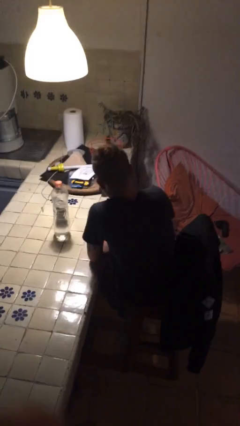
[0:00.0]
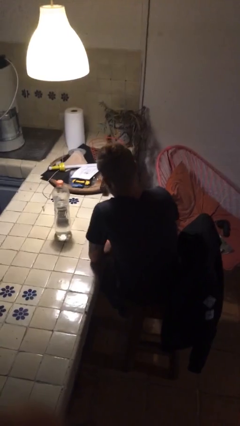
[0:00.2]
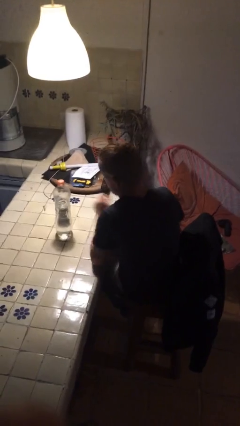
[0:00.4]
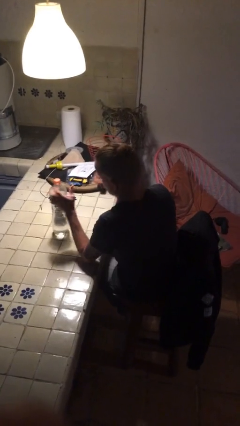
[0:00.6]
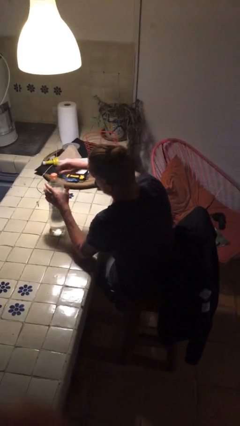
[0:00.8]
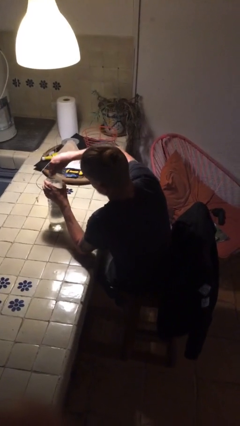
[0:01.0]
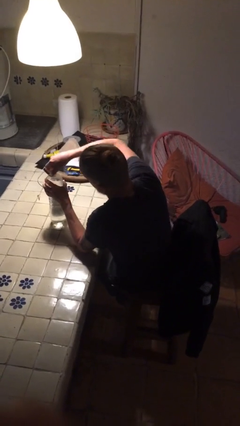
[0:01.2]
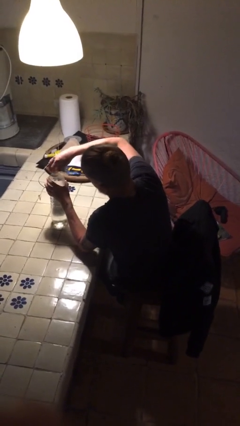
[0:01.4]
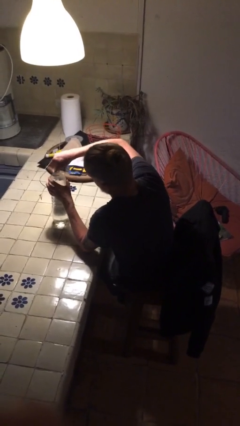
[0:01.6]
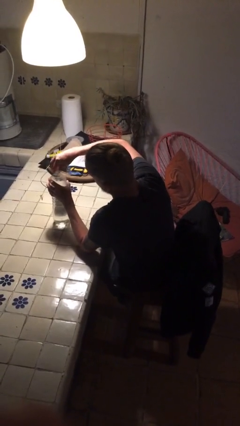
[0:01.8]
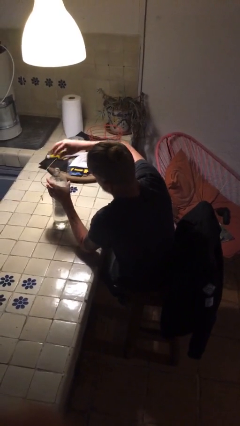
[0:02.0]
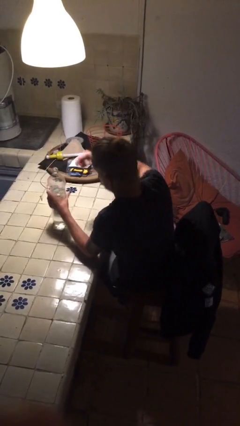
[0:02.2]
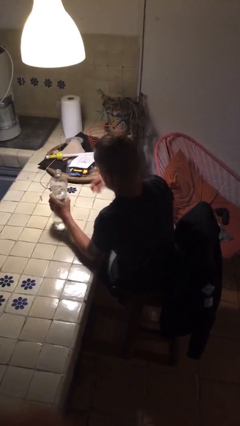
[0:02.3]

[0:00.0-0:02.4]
person unscrews lid from bottle

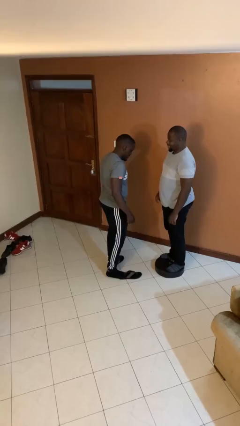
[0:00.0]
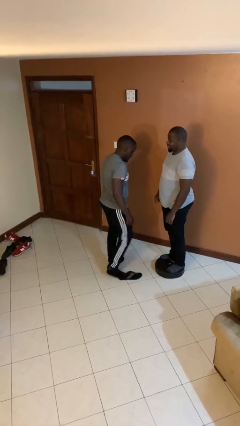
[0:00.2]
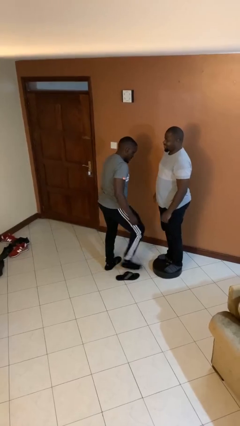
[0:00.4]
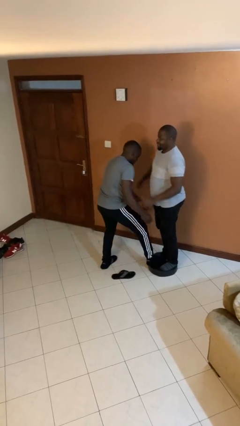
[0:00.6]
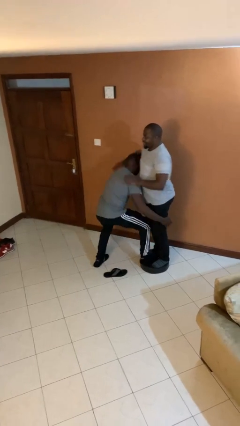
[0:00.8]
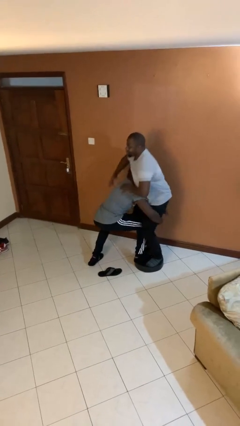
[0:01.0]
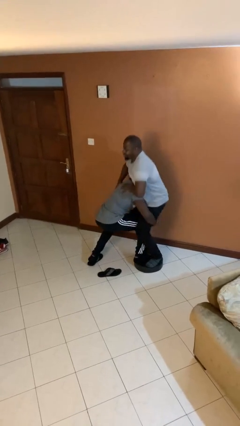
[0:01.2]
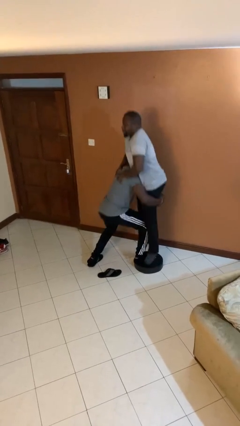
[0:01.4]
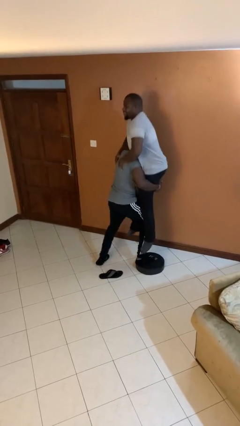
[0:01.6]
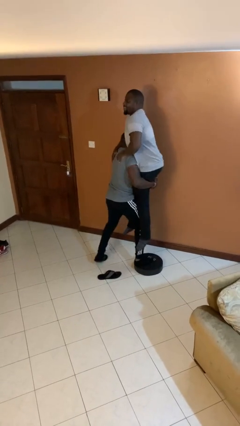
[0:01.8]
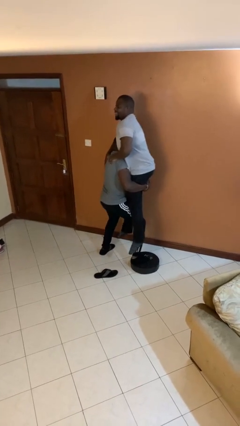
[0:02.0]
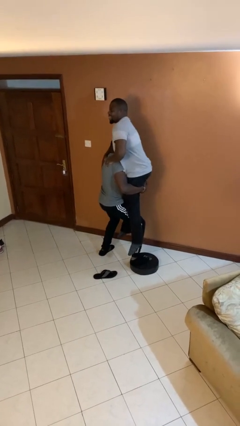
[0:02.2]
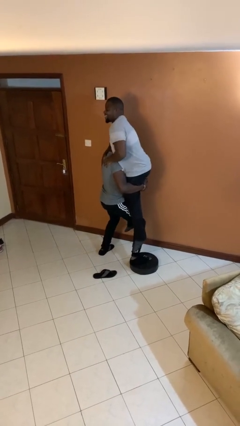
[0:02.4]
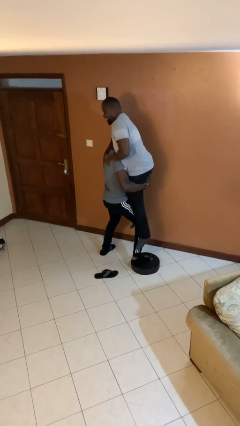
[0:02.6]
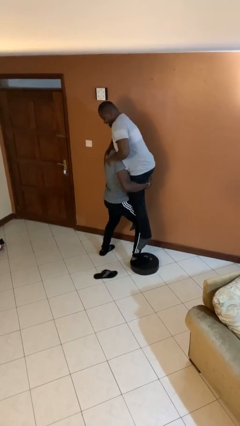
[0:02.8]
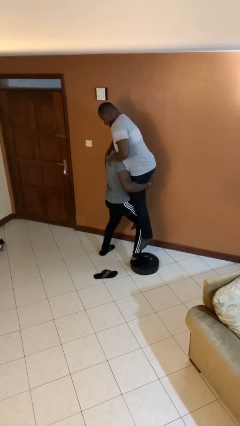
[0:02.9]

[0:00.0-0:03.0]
person picks up person

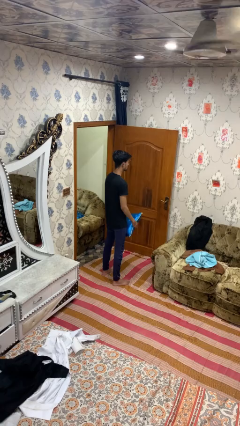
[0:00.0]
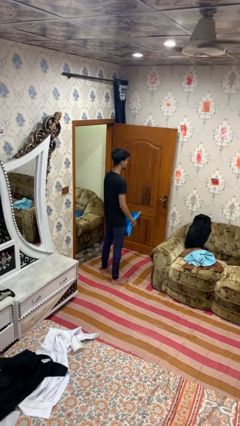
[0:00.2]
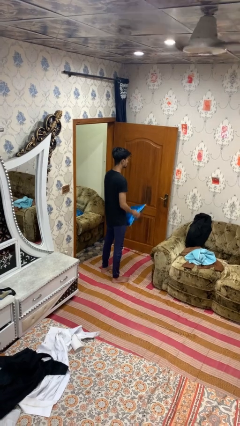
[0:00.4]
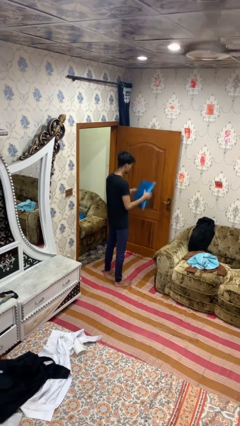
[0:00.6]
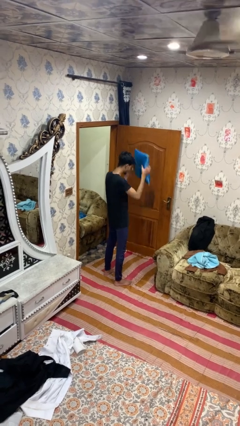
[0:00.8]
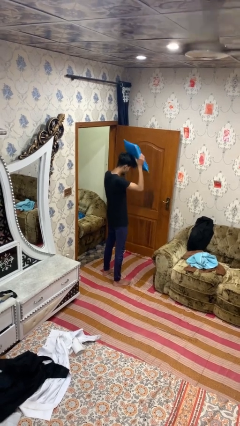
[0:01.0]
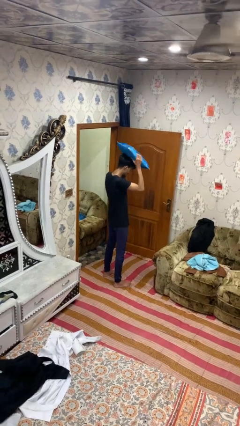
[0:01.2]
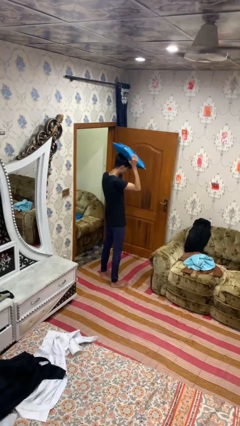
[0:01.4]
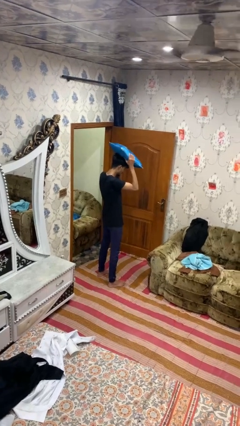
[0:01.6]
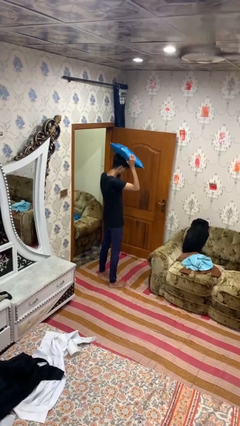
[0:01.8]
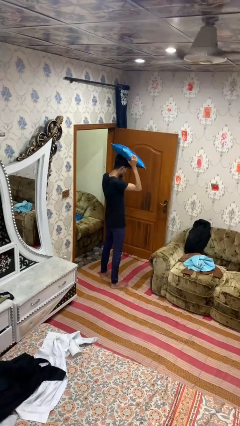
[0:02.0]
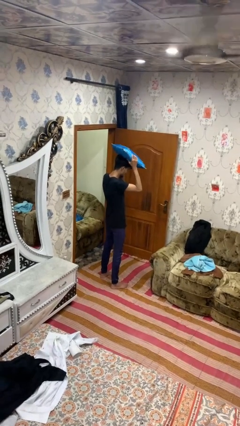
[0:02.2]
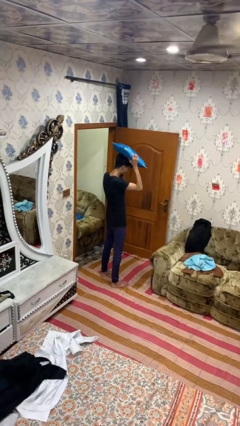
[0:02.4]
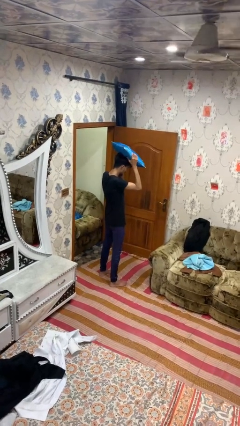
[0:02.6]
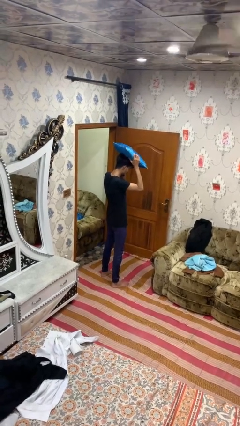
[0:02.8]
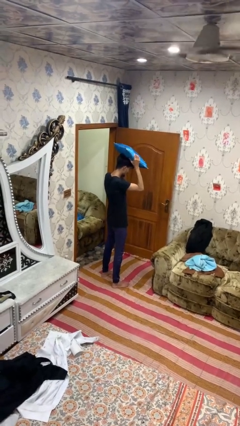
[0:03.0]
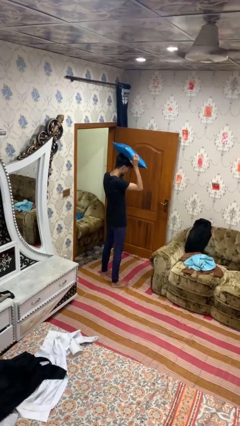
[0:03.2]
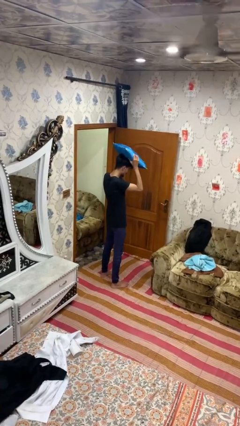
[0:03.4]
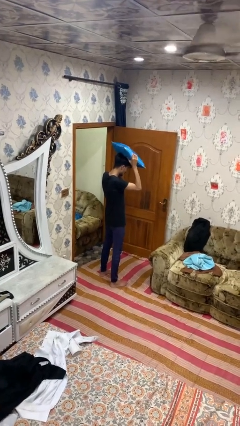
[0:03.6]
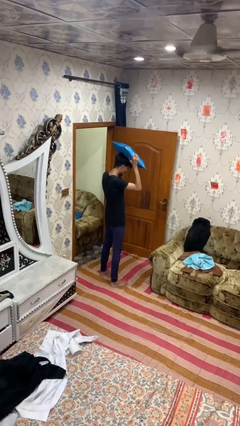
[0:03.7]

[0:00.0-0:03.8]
person holds object above head

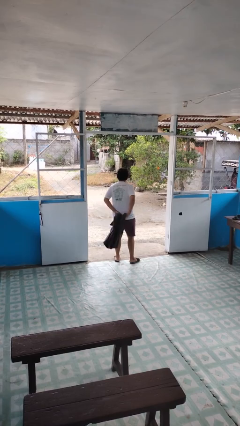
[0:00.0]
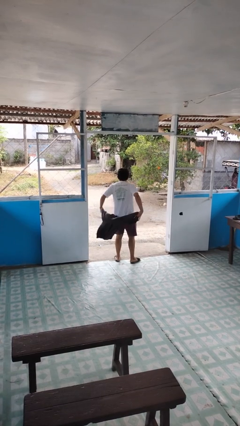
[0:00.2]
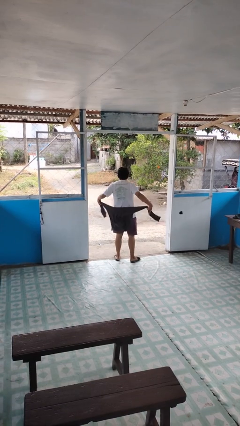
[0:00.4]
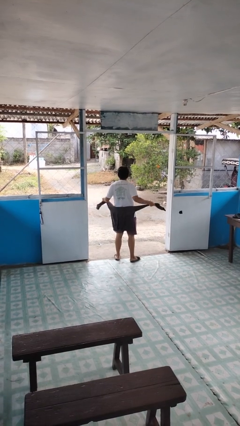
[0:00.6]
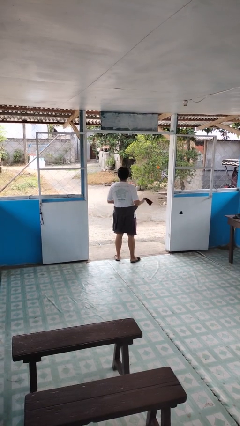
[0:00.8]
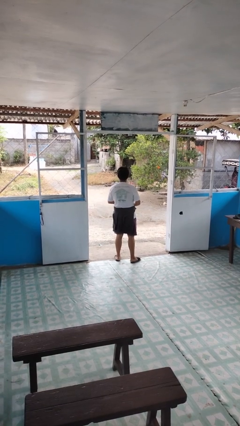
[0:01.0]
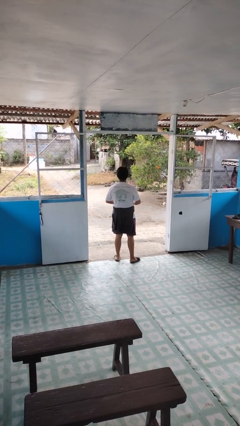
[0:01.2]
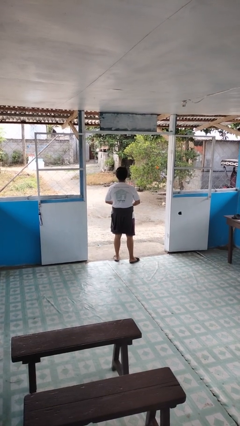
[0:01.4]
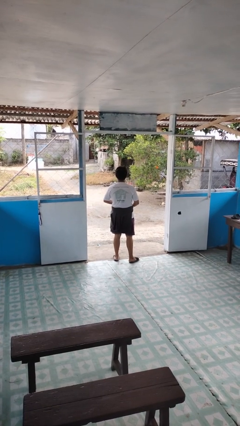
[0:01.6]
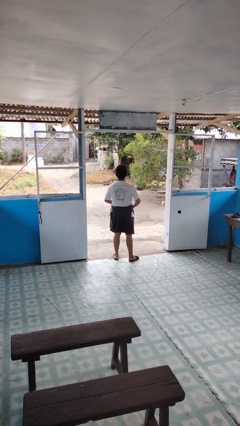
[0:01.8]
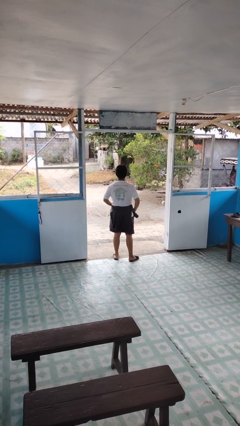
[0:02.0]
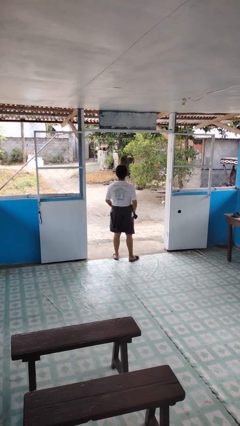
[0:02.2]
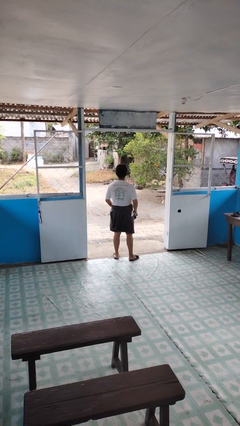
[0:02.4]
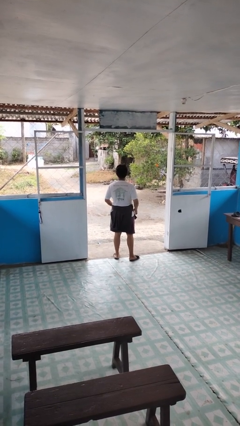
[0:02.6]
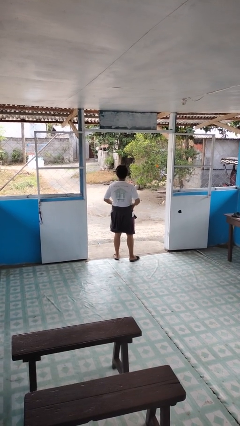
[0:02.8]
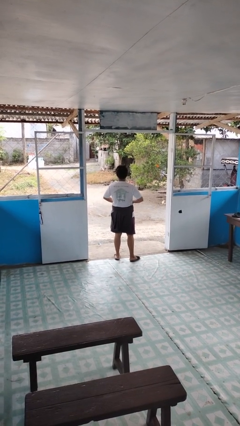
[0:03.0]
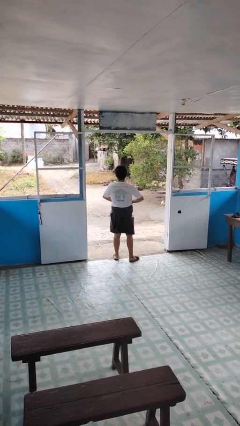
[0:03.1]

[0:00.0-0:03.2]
person ties jacket around waist

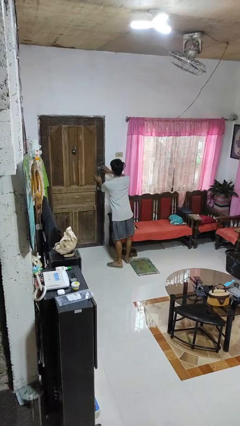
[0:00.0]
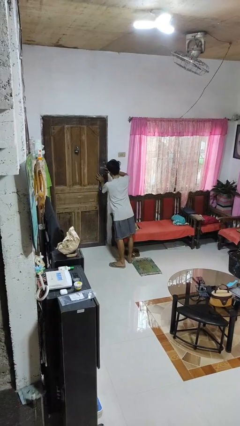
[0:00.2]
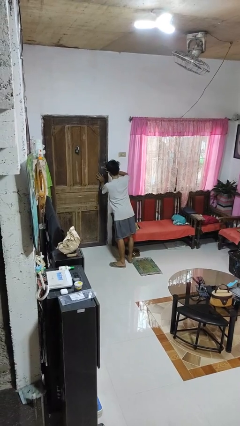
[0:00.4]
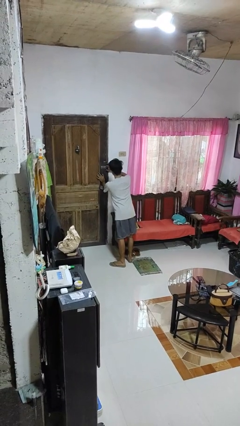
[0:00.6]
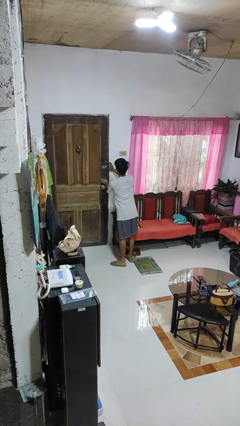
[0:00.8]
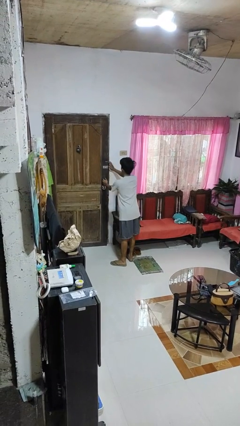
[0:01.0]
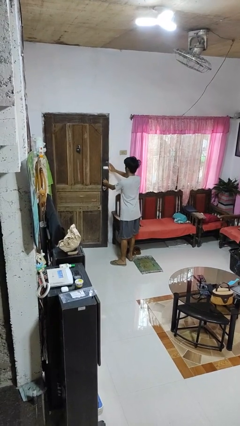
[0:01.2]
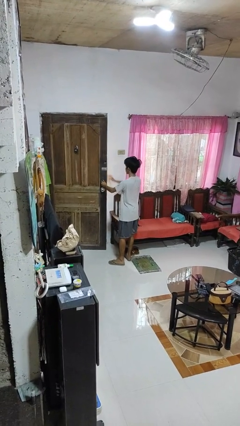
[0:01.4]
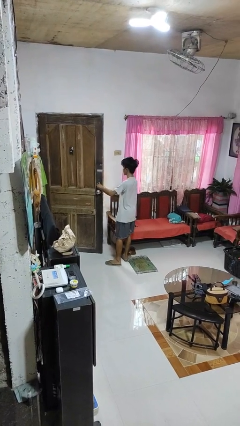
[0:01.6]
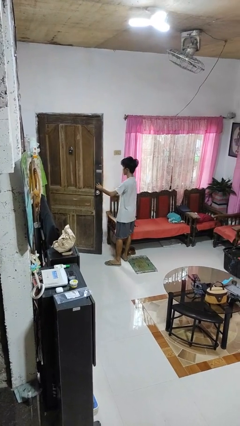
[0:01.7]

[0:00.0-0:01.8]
person unlocks door with keys

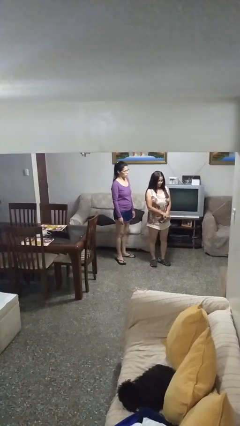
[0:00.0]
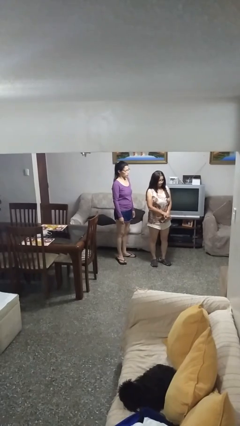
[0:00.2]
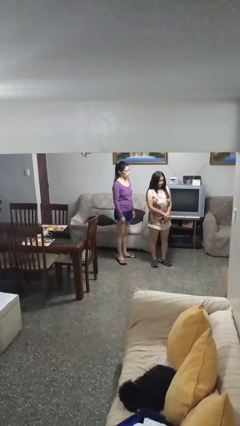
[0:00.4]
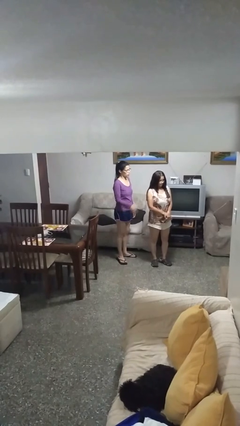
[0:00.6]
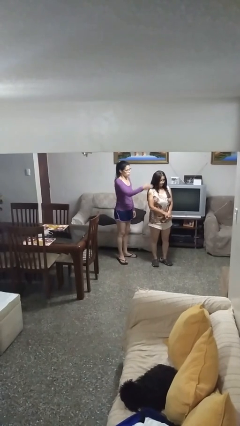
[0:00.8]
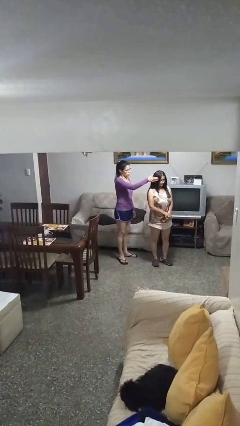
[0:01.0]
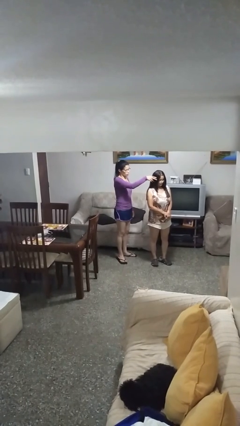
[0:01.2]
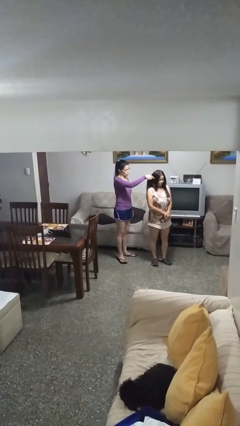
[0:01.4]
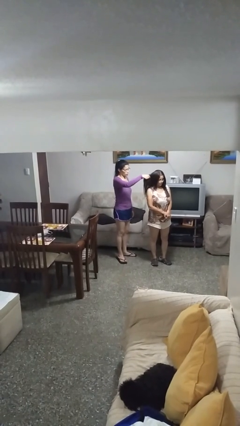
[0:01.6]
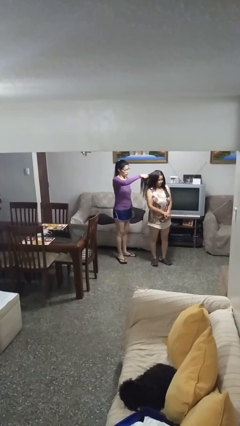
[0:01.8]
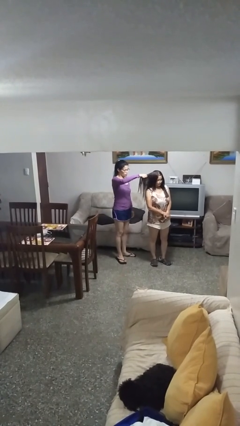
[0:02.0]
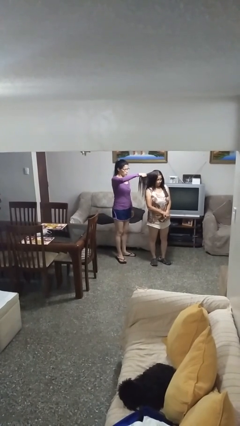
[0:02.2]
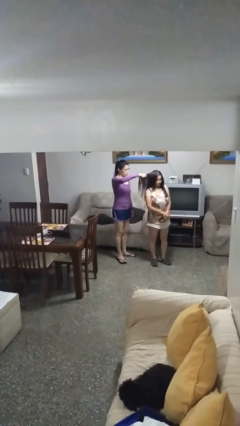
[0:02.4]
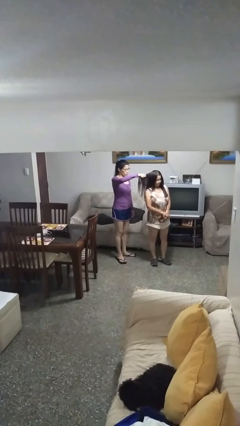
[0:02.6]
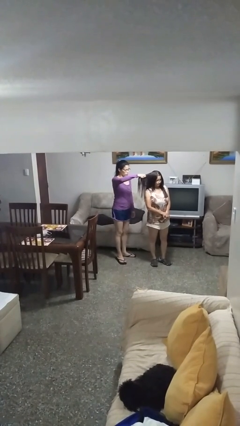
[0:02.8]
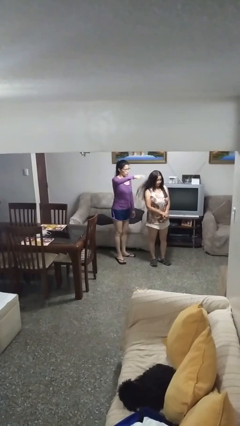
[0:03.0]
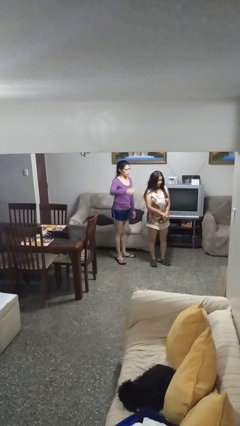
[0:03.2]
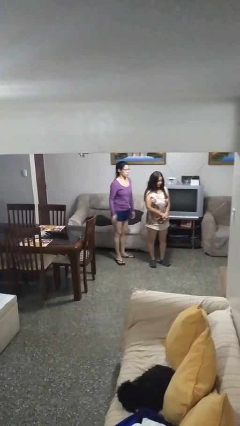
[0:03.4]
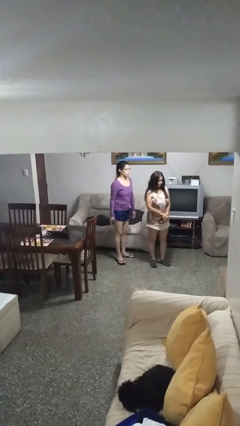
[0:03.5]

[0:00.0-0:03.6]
person grabs person by hair
